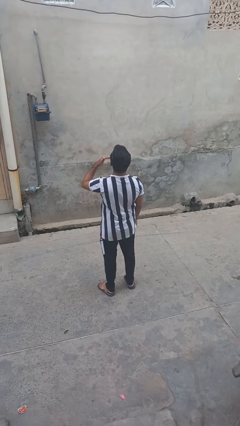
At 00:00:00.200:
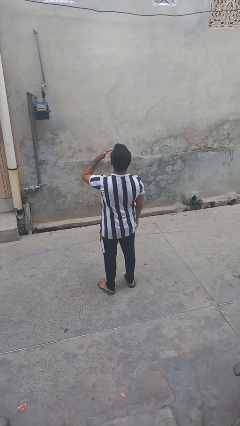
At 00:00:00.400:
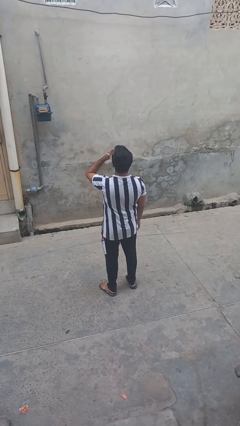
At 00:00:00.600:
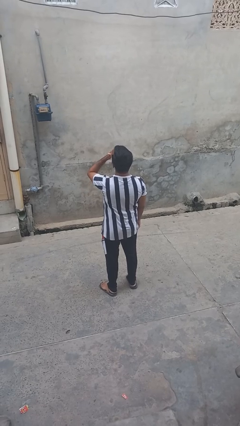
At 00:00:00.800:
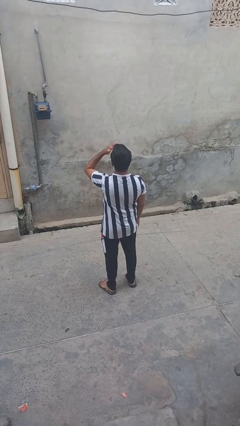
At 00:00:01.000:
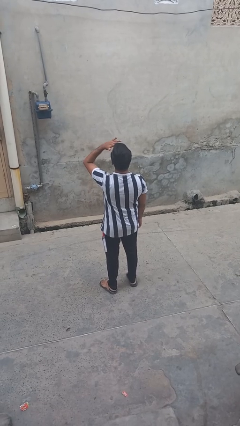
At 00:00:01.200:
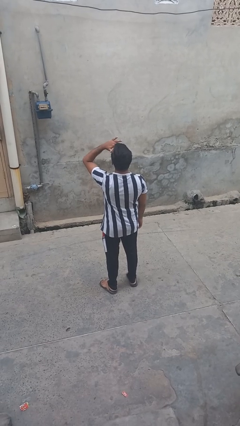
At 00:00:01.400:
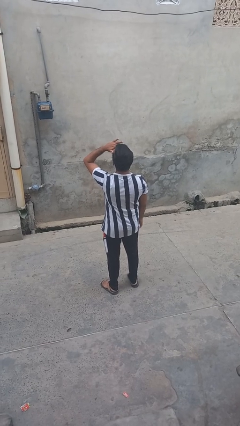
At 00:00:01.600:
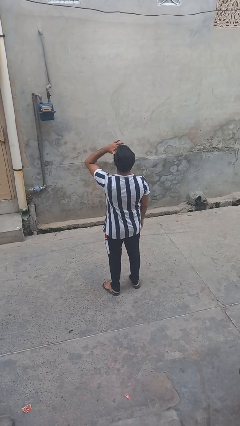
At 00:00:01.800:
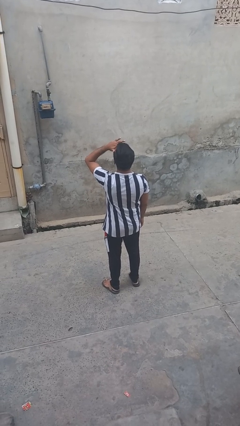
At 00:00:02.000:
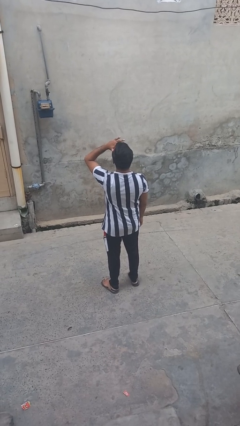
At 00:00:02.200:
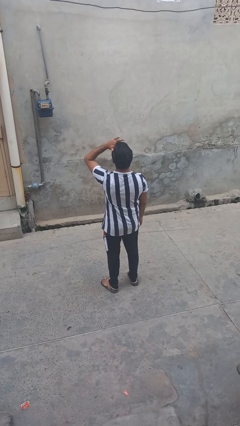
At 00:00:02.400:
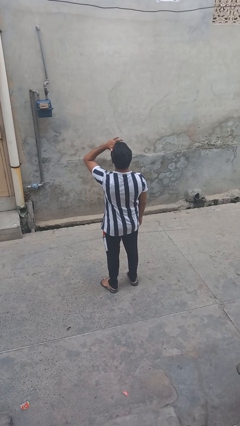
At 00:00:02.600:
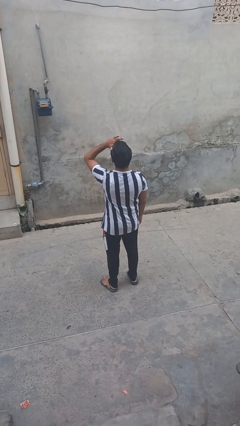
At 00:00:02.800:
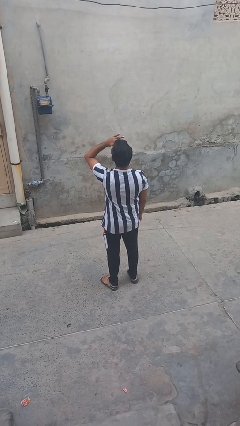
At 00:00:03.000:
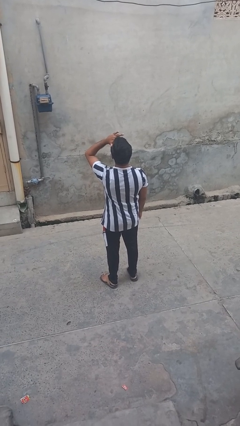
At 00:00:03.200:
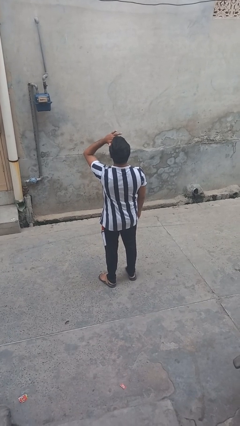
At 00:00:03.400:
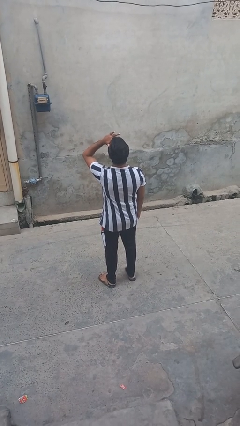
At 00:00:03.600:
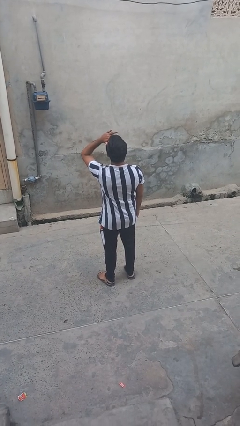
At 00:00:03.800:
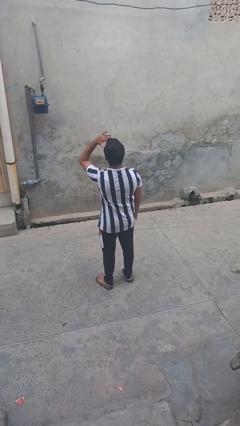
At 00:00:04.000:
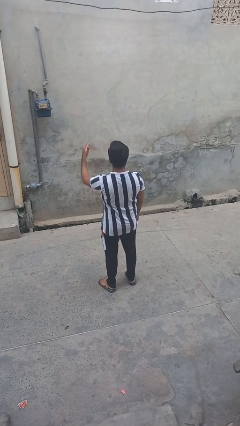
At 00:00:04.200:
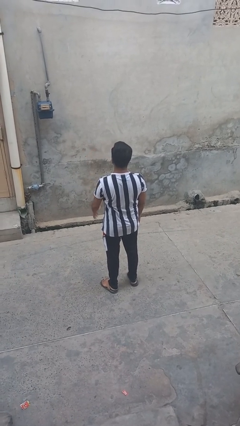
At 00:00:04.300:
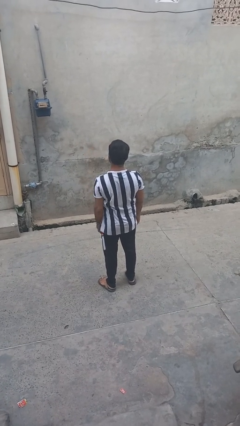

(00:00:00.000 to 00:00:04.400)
person shades eyes

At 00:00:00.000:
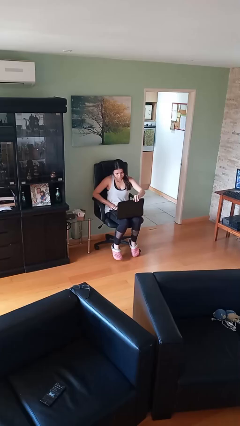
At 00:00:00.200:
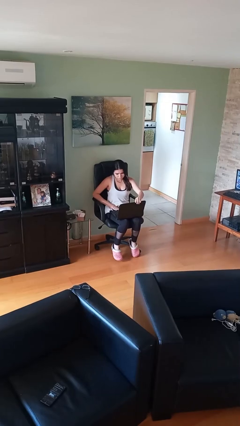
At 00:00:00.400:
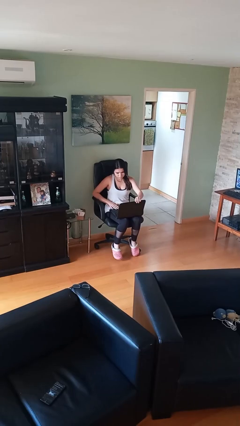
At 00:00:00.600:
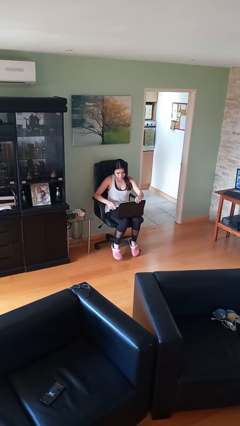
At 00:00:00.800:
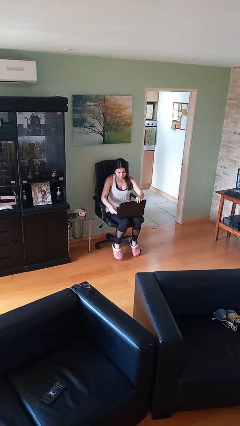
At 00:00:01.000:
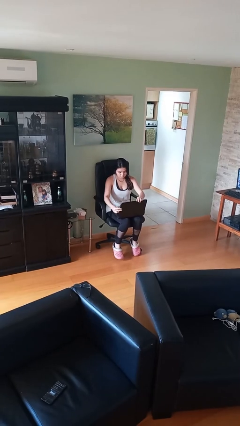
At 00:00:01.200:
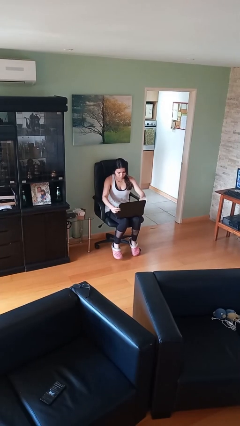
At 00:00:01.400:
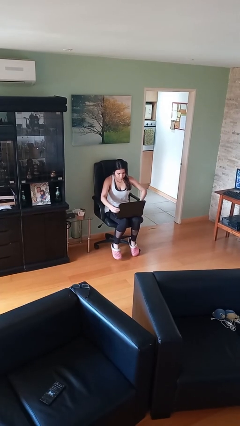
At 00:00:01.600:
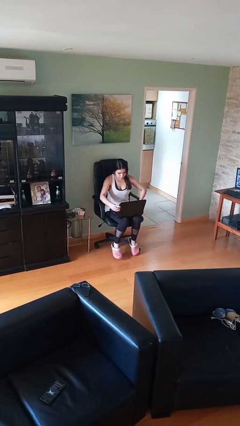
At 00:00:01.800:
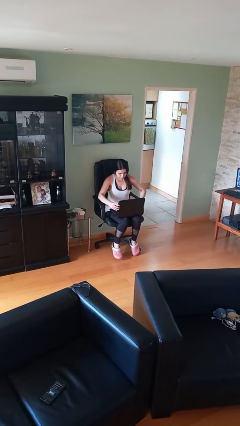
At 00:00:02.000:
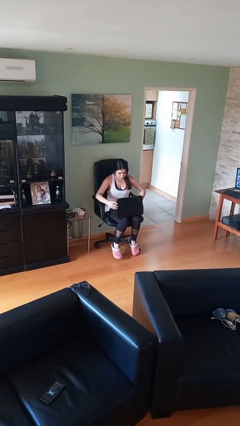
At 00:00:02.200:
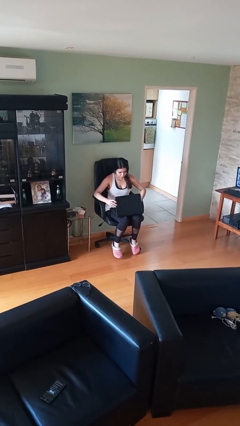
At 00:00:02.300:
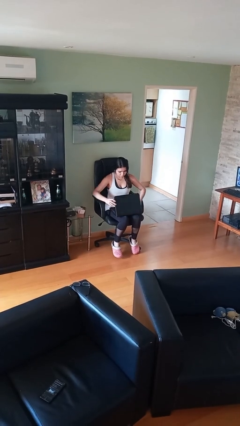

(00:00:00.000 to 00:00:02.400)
person interacts with laptop

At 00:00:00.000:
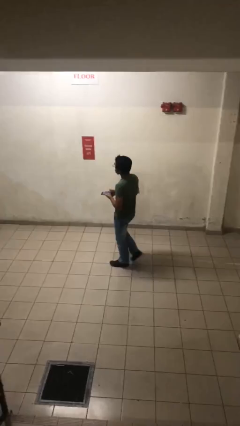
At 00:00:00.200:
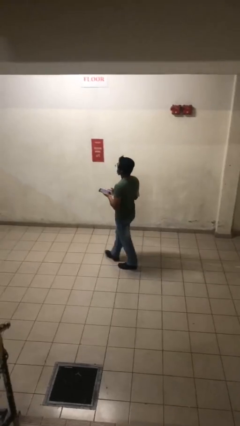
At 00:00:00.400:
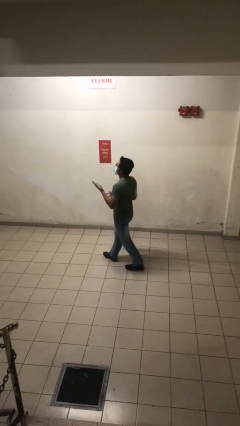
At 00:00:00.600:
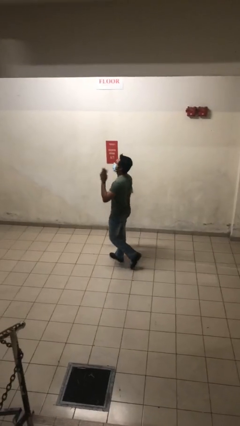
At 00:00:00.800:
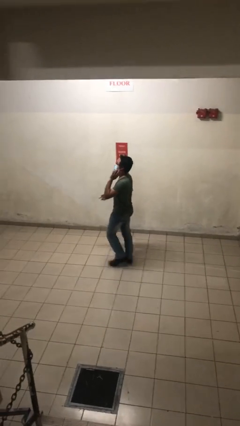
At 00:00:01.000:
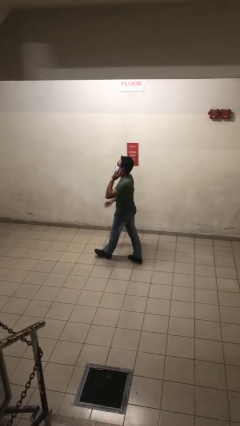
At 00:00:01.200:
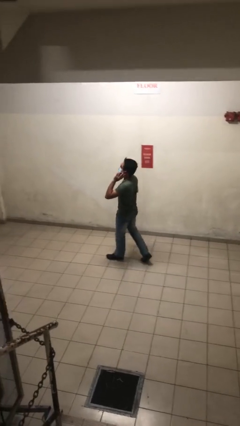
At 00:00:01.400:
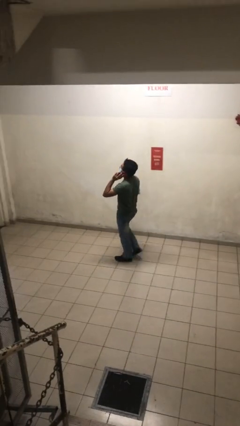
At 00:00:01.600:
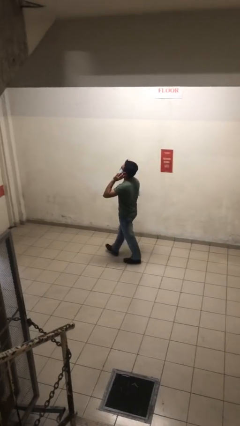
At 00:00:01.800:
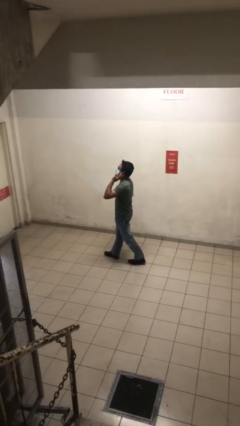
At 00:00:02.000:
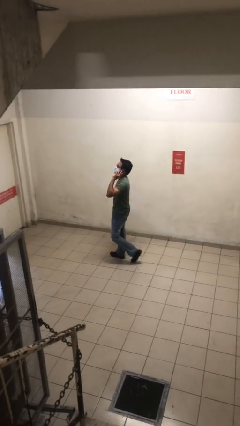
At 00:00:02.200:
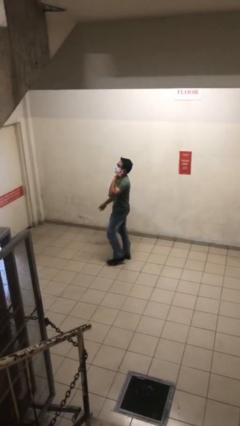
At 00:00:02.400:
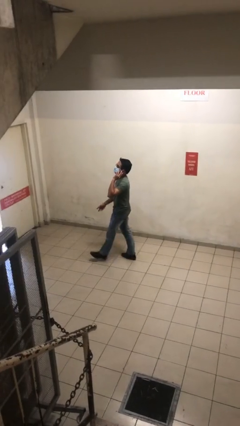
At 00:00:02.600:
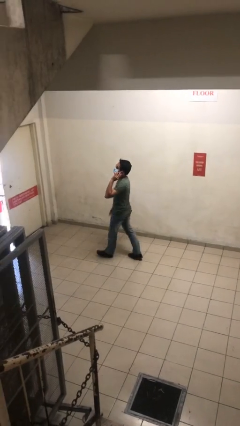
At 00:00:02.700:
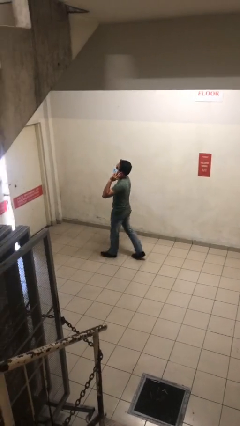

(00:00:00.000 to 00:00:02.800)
person talks on phone

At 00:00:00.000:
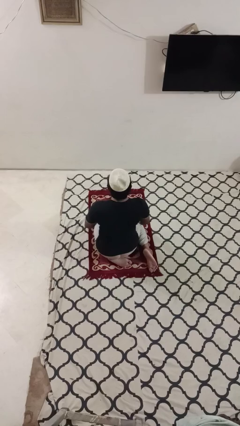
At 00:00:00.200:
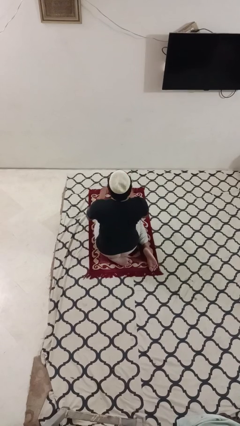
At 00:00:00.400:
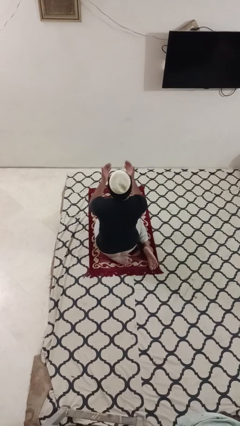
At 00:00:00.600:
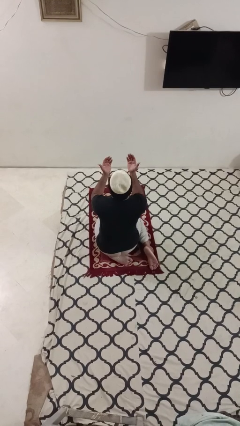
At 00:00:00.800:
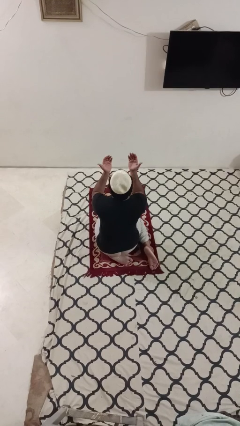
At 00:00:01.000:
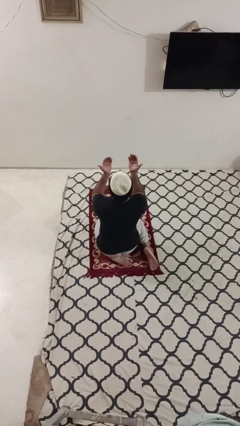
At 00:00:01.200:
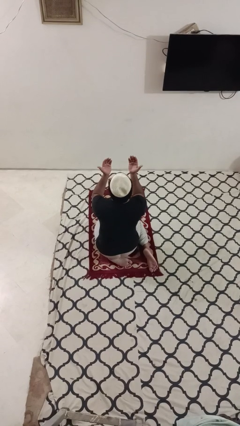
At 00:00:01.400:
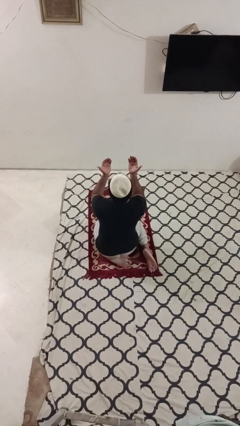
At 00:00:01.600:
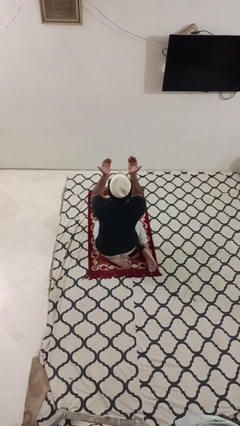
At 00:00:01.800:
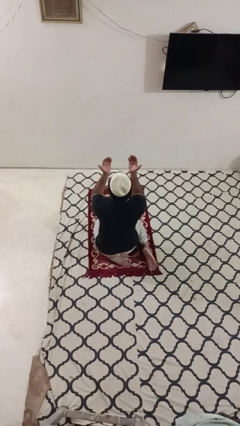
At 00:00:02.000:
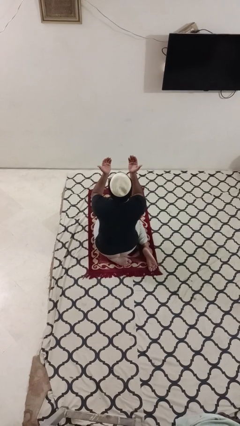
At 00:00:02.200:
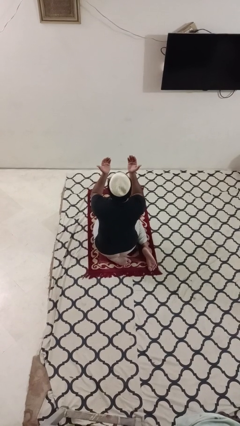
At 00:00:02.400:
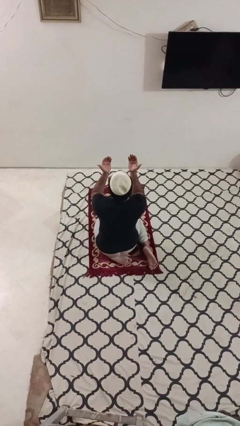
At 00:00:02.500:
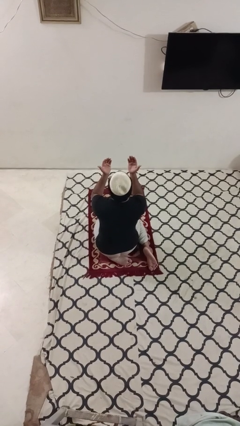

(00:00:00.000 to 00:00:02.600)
person prays

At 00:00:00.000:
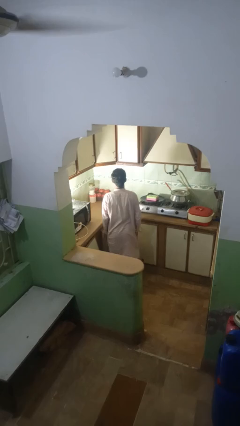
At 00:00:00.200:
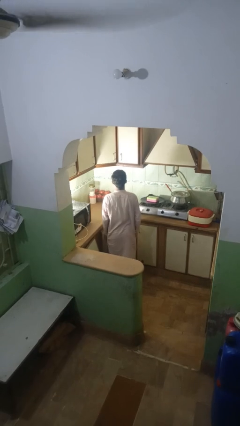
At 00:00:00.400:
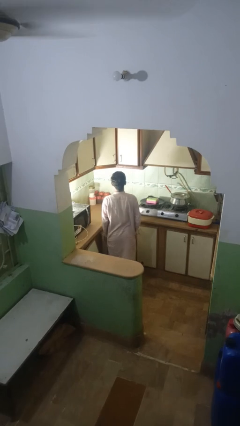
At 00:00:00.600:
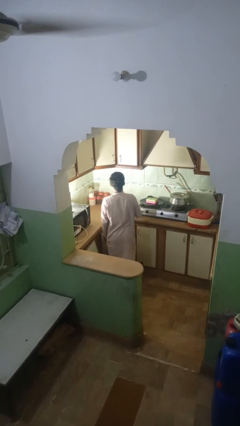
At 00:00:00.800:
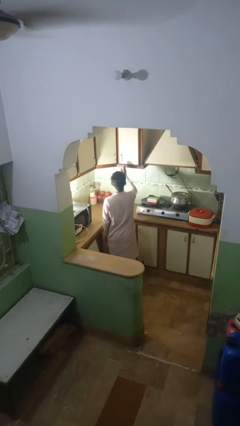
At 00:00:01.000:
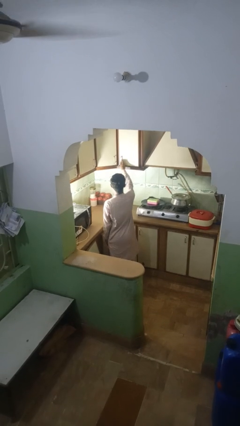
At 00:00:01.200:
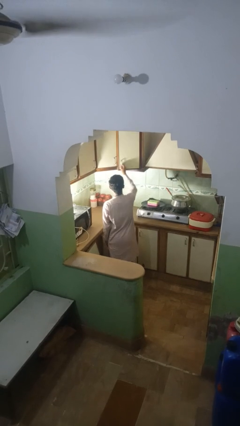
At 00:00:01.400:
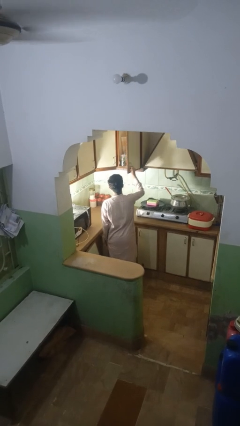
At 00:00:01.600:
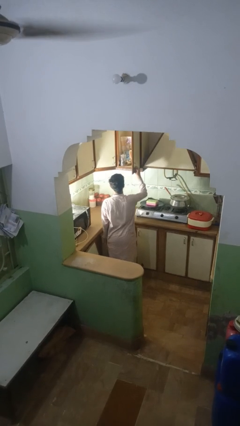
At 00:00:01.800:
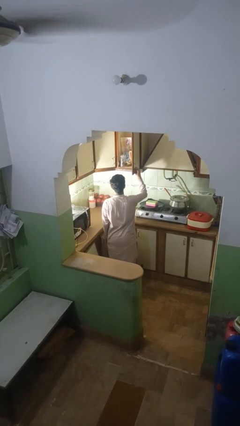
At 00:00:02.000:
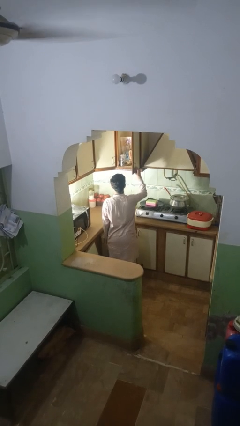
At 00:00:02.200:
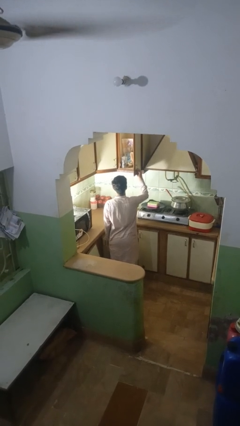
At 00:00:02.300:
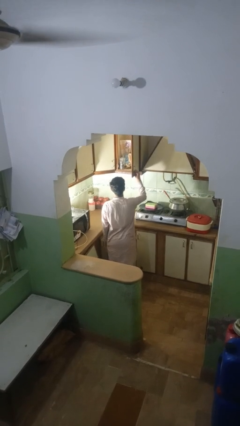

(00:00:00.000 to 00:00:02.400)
person opens kitchen drawer

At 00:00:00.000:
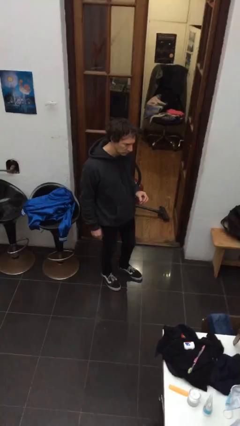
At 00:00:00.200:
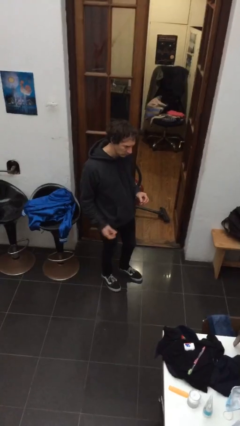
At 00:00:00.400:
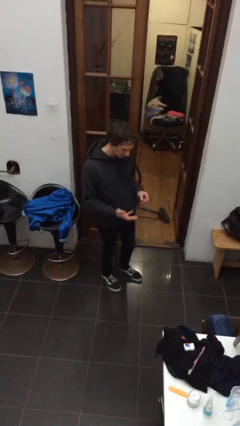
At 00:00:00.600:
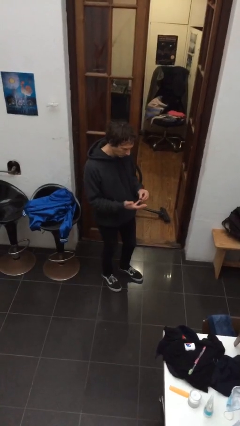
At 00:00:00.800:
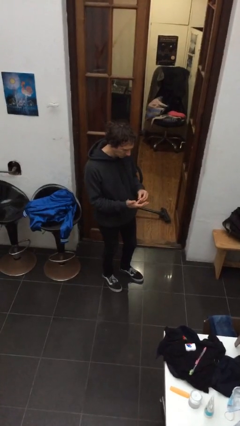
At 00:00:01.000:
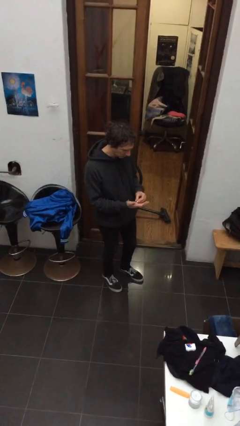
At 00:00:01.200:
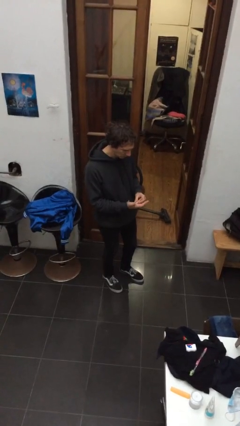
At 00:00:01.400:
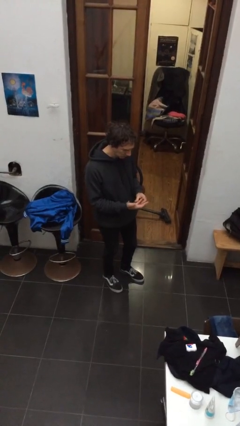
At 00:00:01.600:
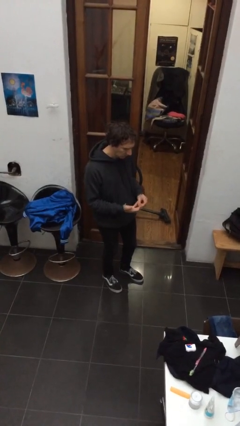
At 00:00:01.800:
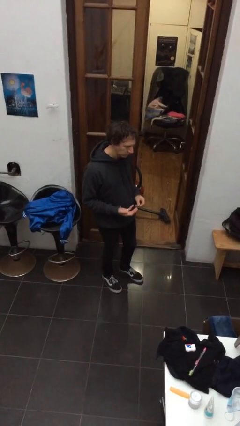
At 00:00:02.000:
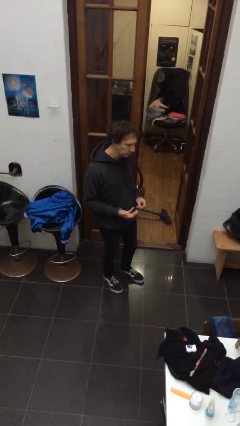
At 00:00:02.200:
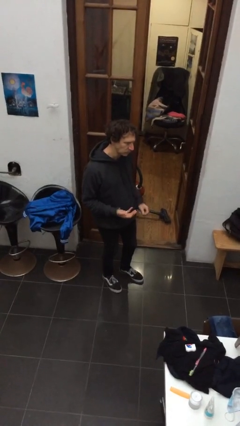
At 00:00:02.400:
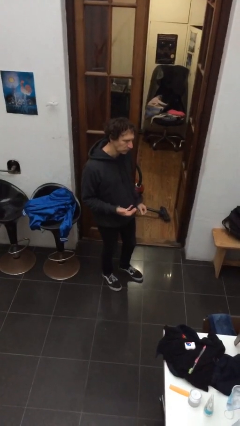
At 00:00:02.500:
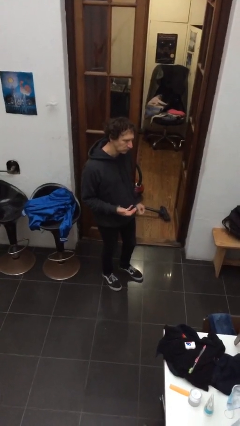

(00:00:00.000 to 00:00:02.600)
person puts on ring

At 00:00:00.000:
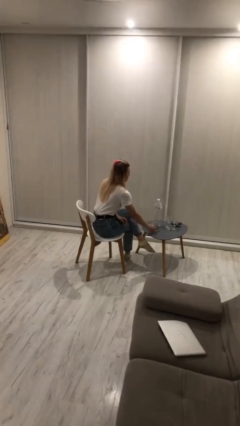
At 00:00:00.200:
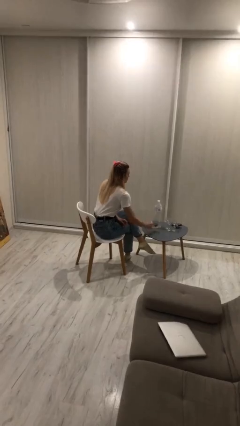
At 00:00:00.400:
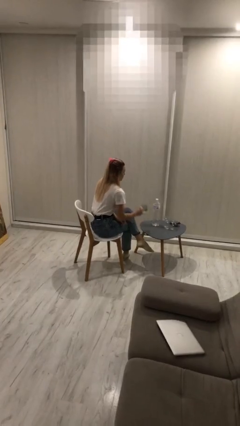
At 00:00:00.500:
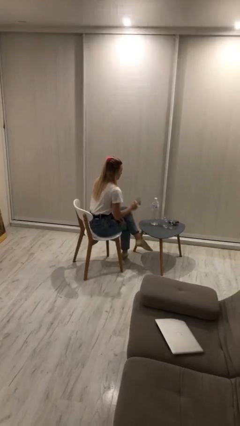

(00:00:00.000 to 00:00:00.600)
person picks up object from table
